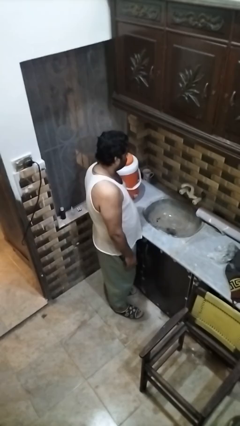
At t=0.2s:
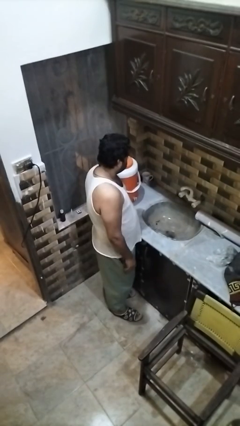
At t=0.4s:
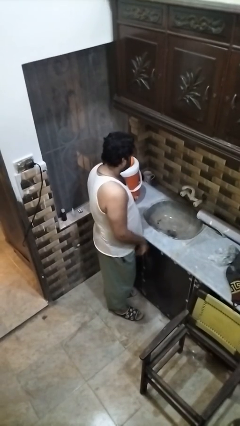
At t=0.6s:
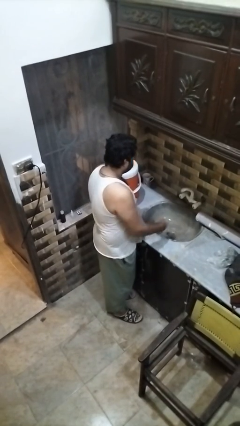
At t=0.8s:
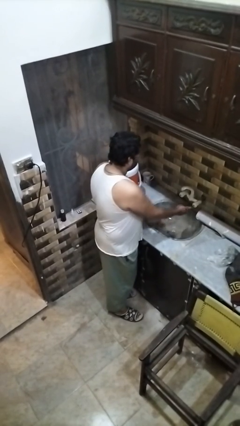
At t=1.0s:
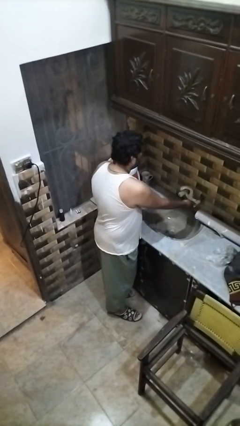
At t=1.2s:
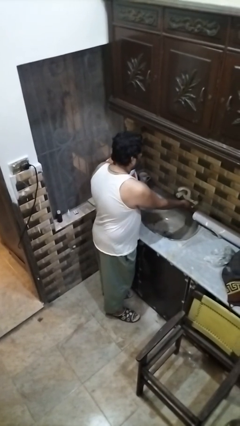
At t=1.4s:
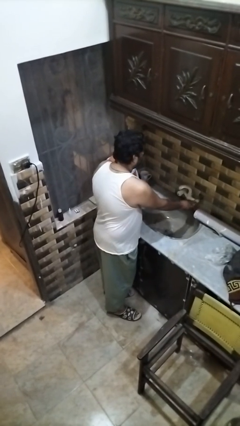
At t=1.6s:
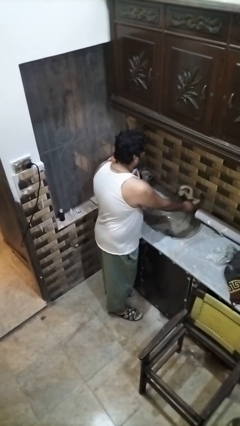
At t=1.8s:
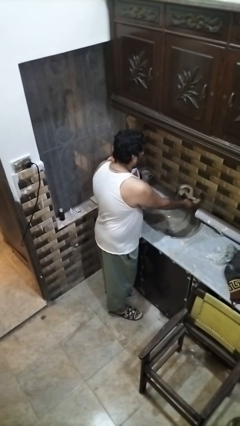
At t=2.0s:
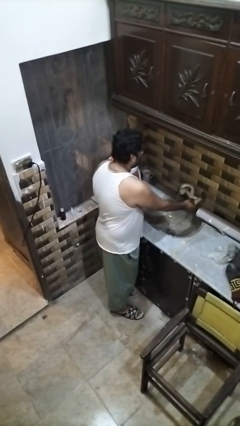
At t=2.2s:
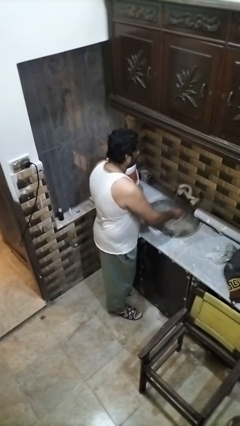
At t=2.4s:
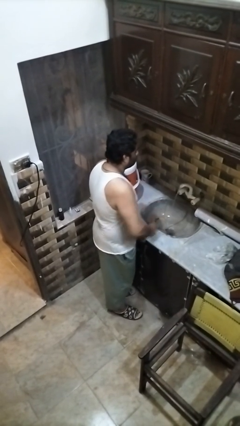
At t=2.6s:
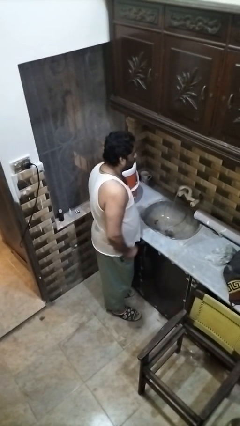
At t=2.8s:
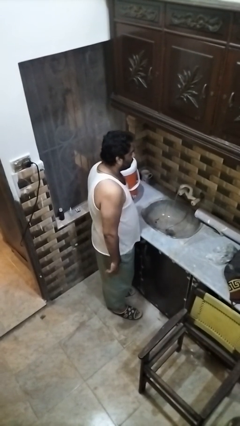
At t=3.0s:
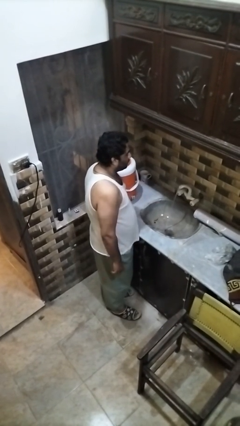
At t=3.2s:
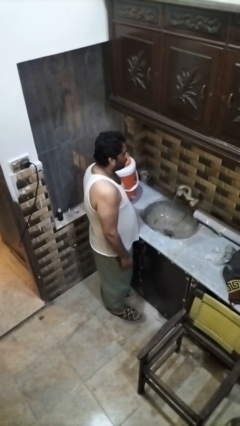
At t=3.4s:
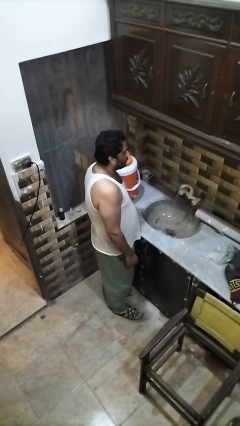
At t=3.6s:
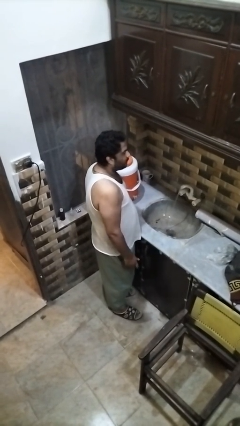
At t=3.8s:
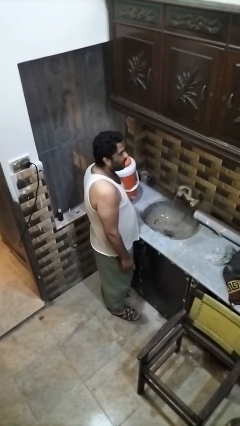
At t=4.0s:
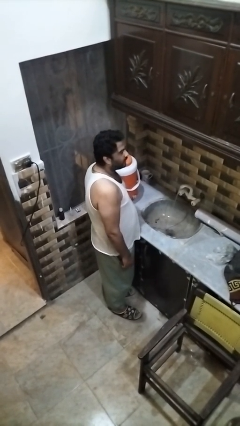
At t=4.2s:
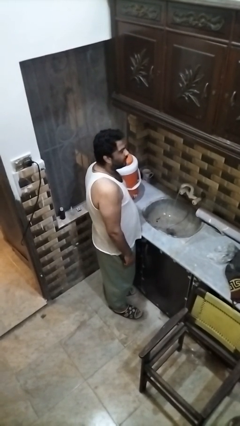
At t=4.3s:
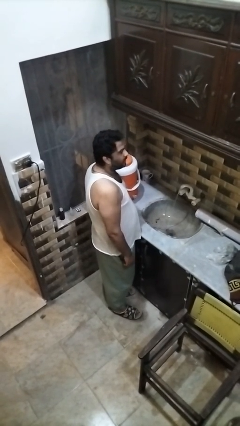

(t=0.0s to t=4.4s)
person turns on faucet

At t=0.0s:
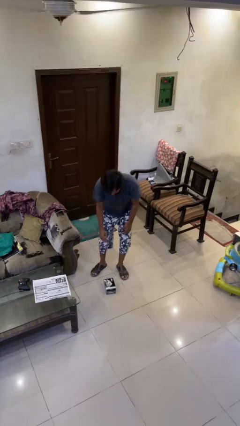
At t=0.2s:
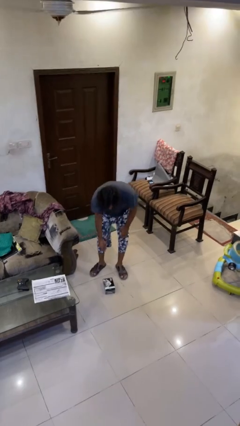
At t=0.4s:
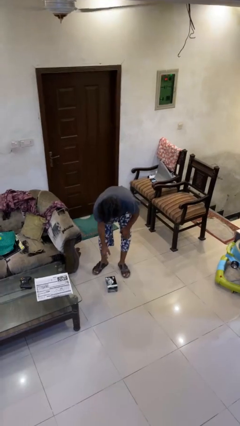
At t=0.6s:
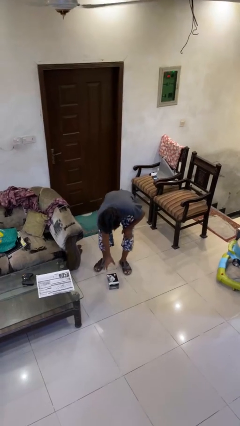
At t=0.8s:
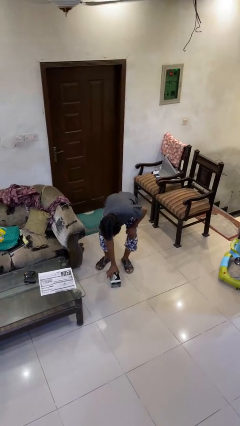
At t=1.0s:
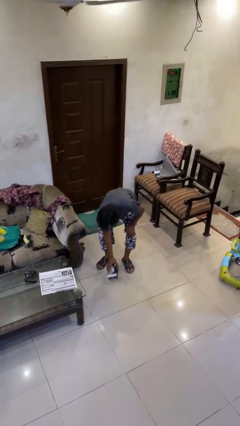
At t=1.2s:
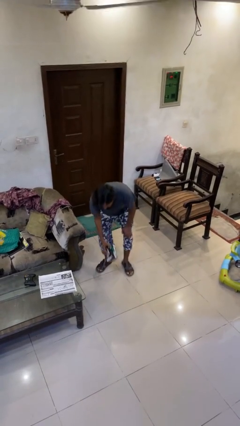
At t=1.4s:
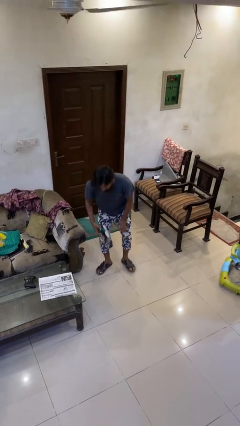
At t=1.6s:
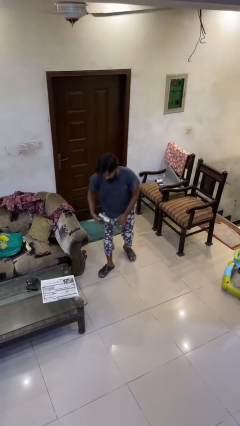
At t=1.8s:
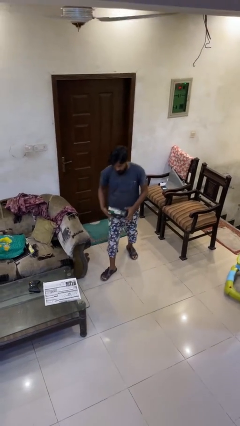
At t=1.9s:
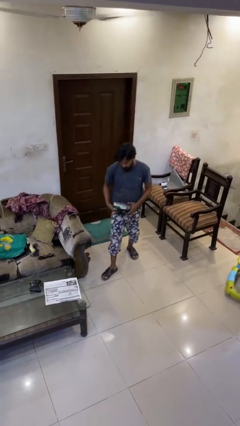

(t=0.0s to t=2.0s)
person picks up object from floor

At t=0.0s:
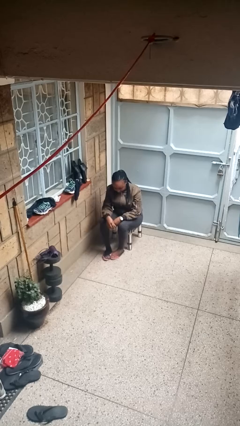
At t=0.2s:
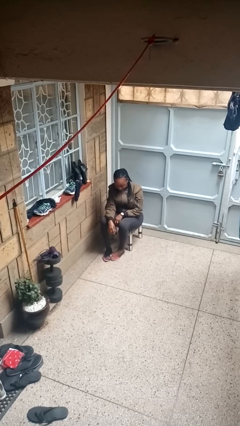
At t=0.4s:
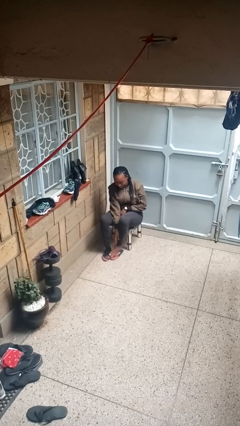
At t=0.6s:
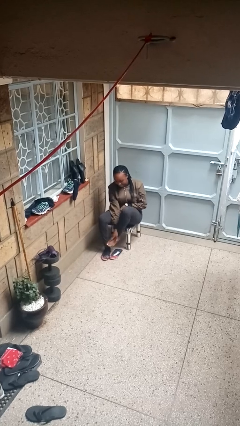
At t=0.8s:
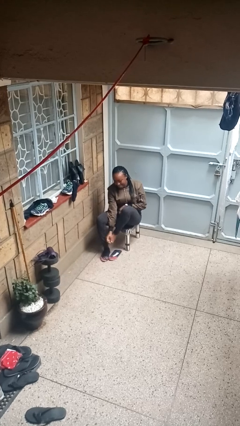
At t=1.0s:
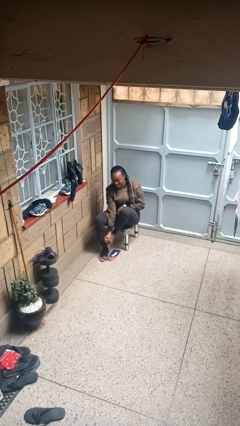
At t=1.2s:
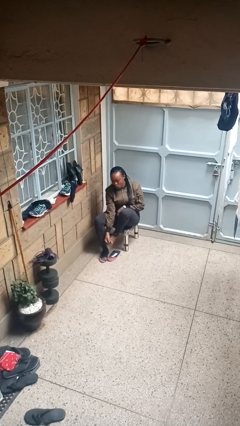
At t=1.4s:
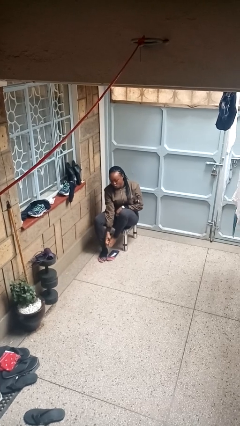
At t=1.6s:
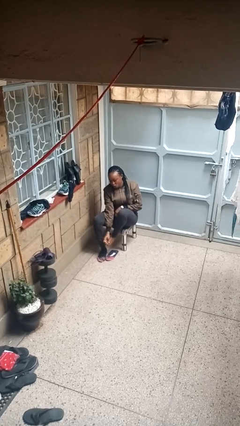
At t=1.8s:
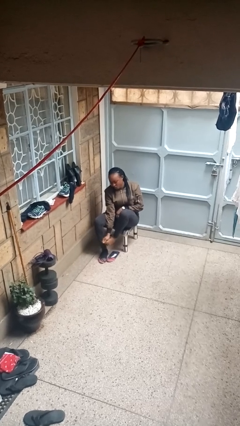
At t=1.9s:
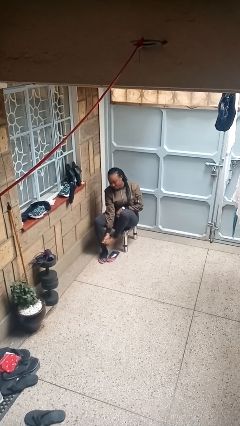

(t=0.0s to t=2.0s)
person rubs foot

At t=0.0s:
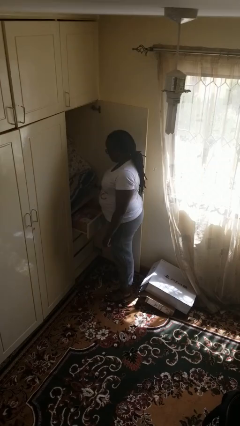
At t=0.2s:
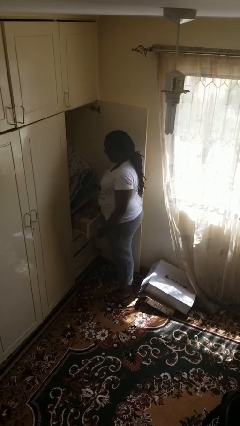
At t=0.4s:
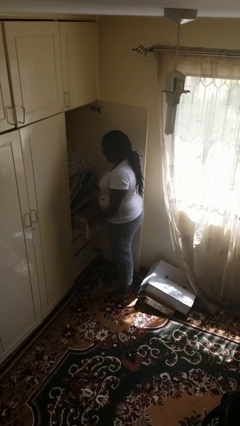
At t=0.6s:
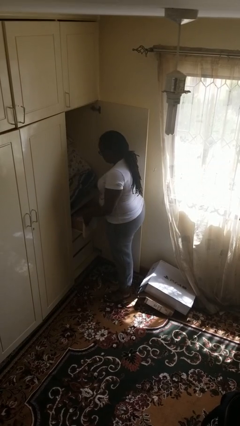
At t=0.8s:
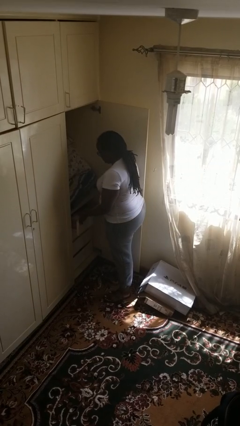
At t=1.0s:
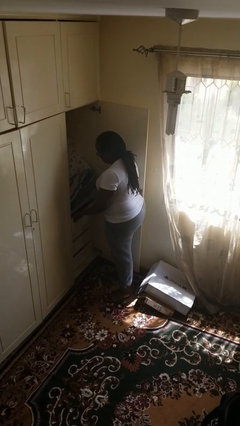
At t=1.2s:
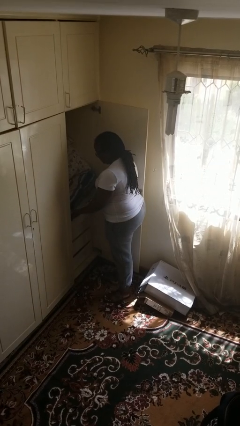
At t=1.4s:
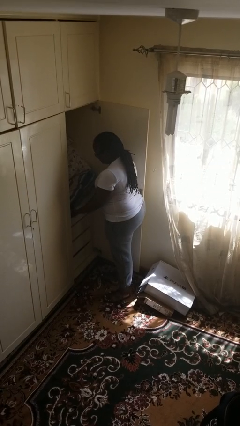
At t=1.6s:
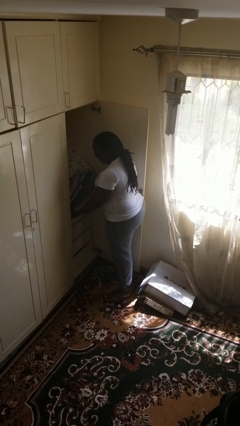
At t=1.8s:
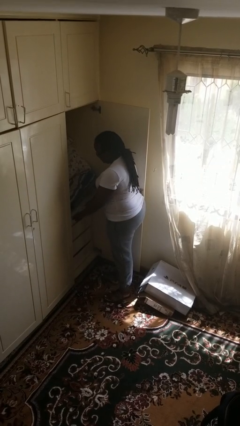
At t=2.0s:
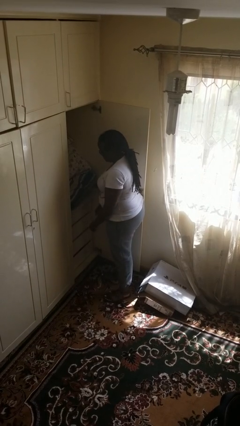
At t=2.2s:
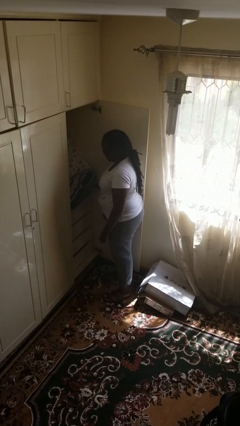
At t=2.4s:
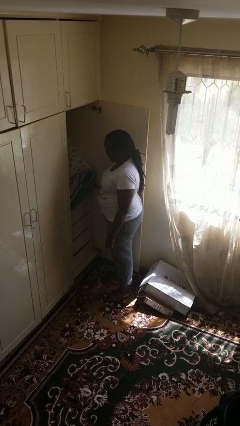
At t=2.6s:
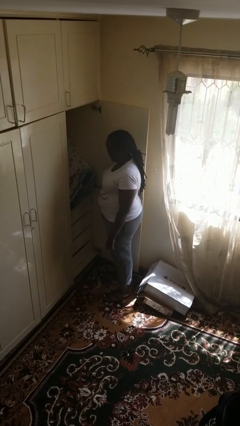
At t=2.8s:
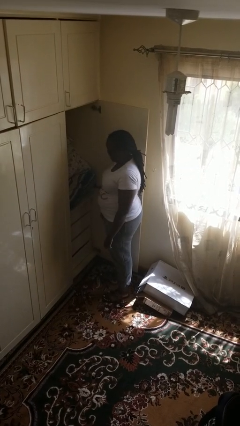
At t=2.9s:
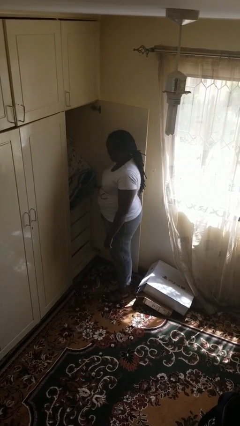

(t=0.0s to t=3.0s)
person closes dresser drawer

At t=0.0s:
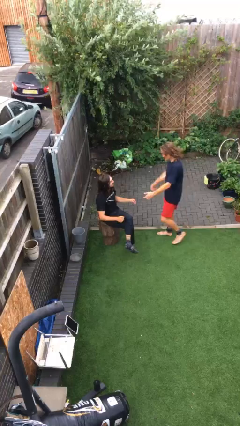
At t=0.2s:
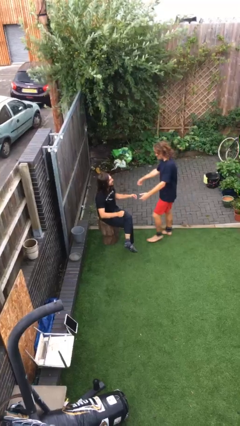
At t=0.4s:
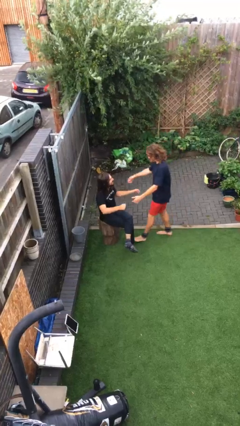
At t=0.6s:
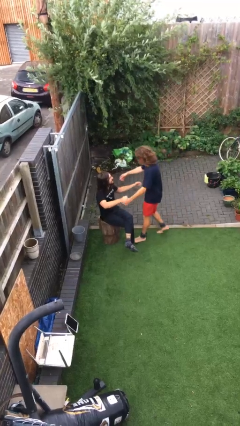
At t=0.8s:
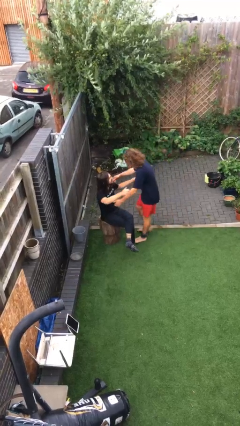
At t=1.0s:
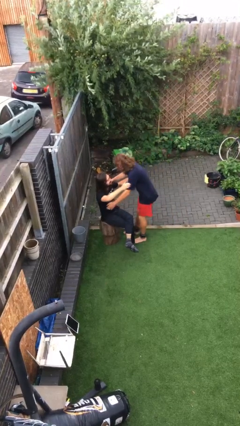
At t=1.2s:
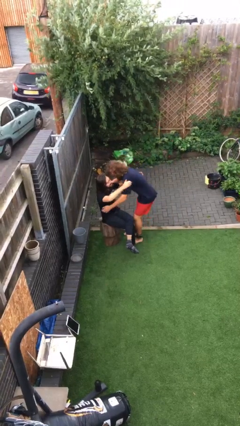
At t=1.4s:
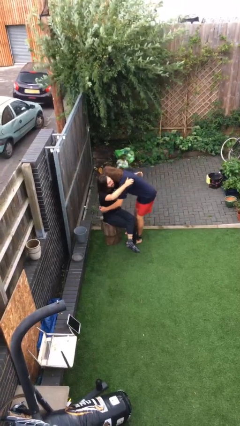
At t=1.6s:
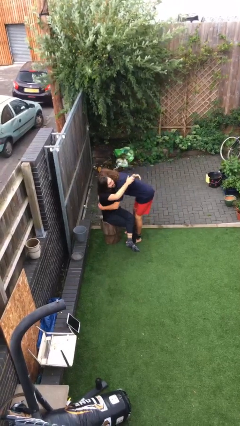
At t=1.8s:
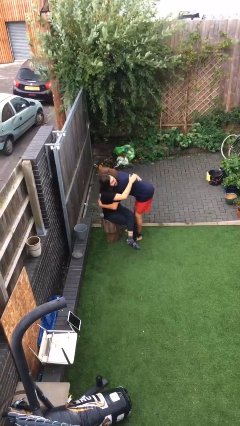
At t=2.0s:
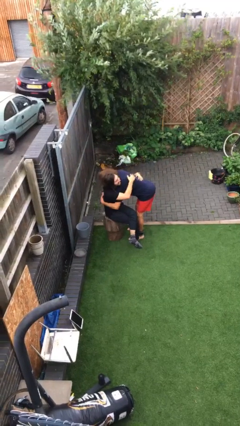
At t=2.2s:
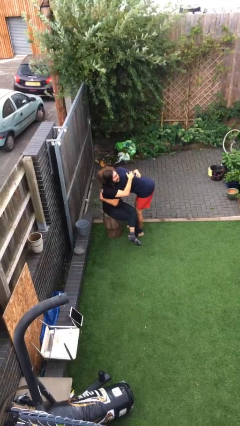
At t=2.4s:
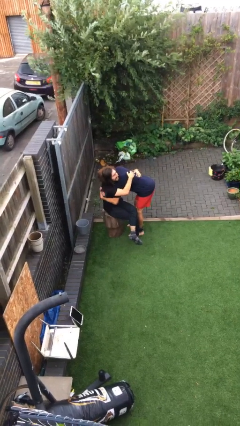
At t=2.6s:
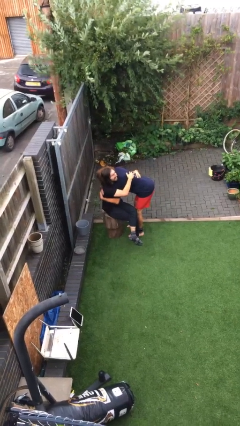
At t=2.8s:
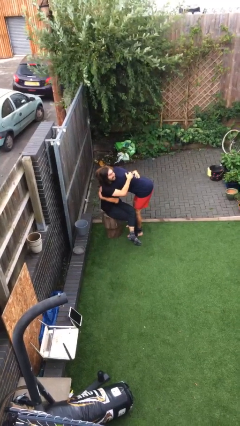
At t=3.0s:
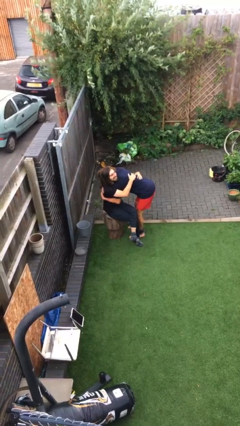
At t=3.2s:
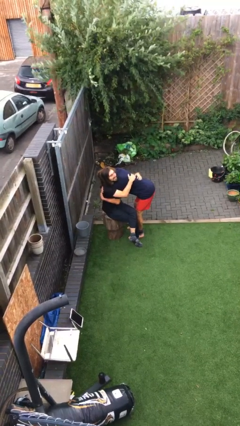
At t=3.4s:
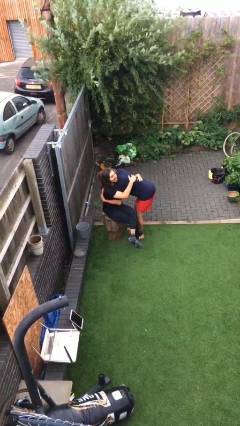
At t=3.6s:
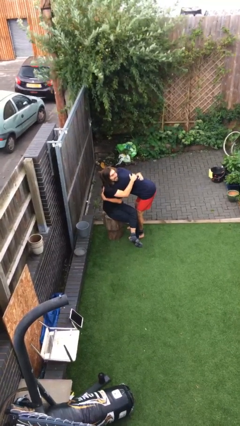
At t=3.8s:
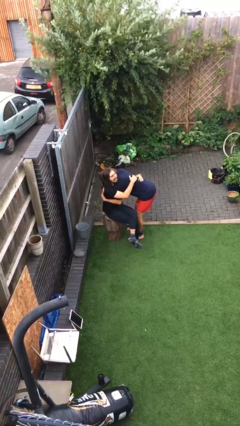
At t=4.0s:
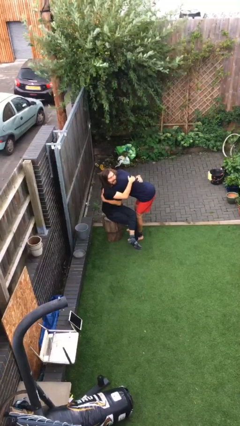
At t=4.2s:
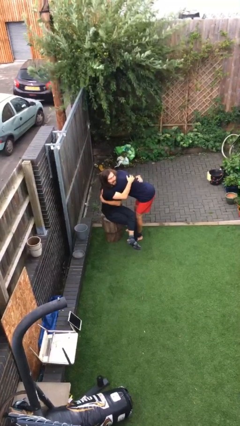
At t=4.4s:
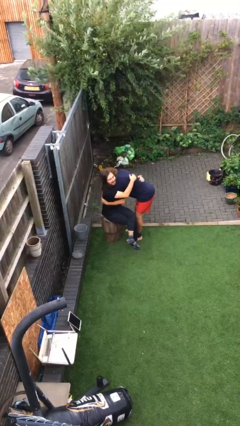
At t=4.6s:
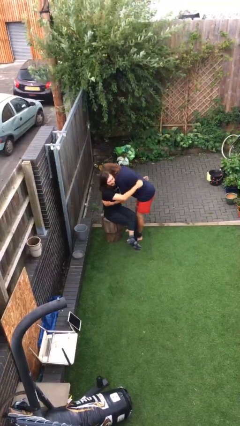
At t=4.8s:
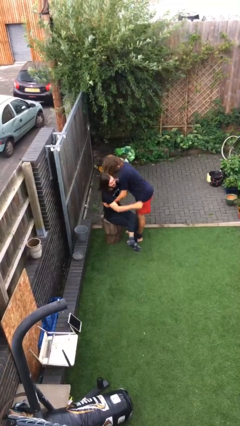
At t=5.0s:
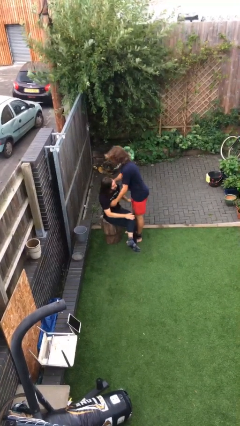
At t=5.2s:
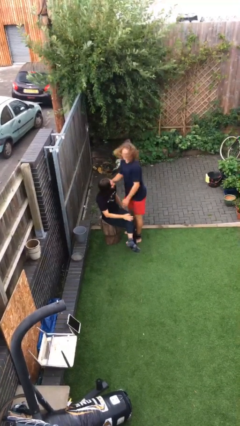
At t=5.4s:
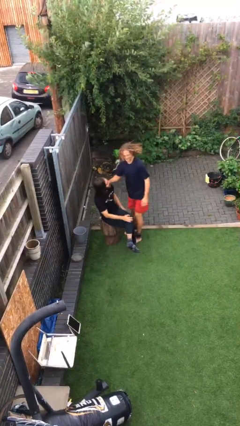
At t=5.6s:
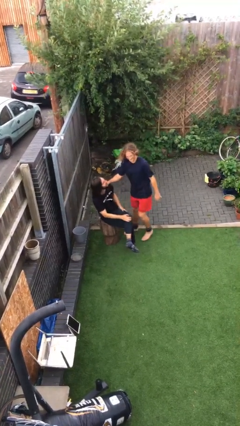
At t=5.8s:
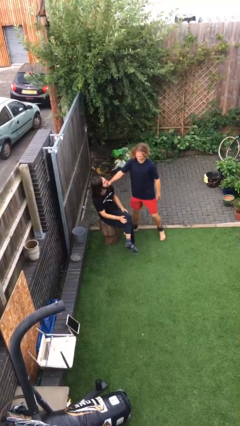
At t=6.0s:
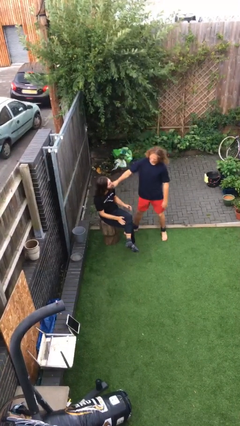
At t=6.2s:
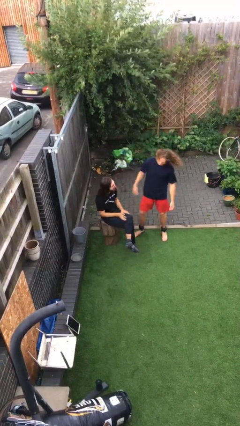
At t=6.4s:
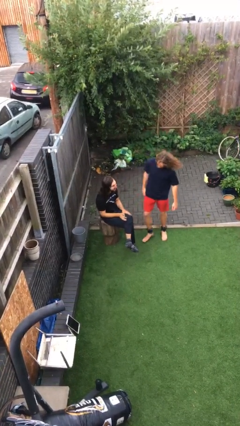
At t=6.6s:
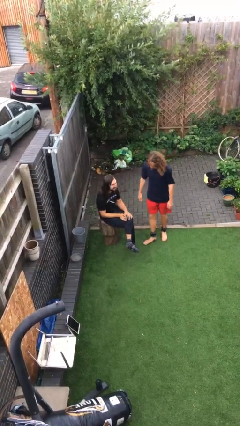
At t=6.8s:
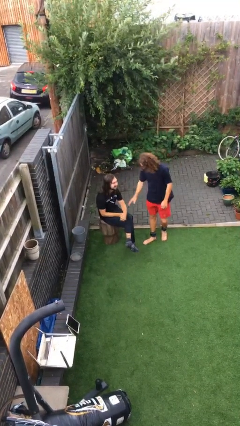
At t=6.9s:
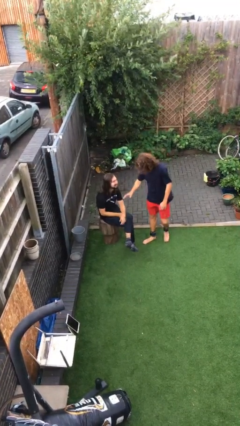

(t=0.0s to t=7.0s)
person embraces person
